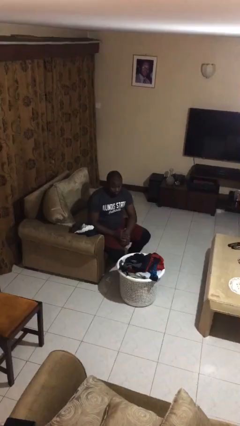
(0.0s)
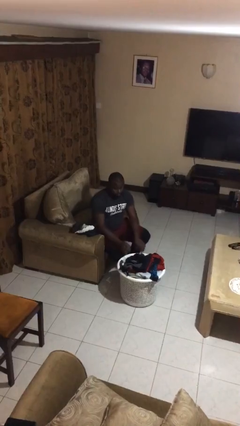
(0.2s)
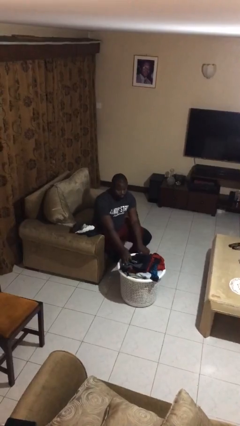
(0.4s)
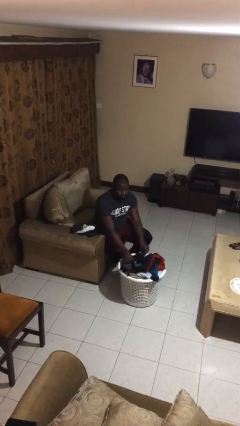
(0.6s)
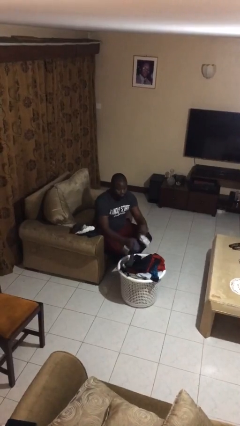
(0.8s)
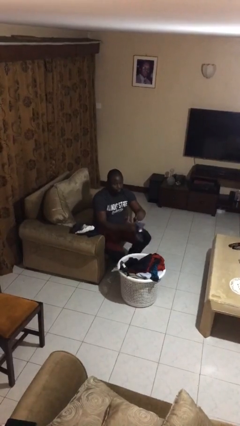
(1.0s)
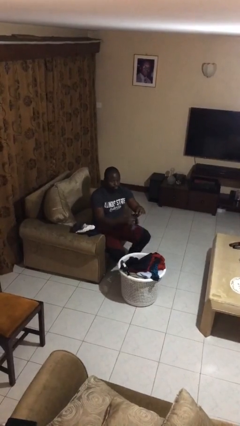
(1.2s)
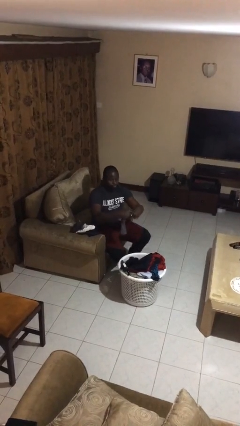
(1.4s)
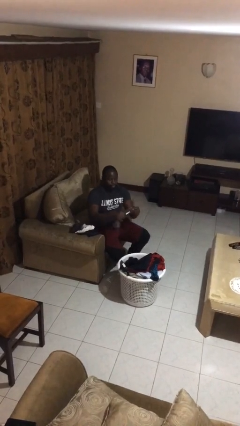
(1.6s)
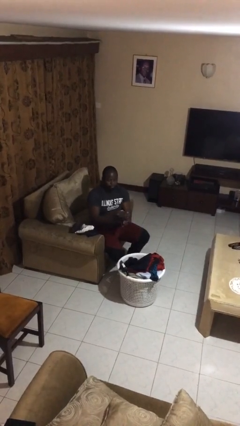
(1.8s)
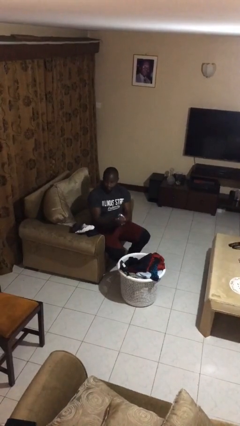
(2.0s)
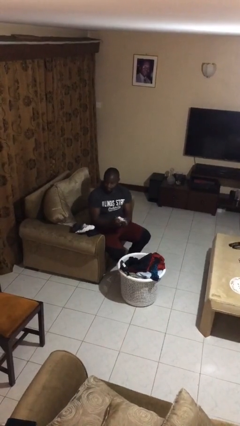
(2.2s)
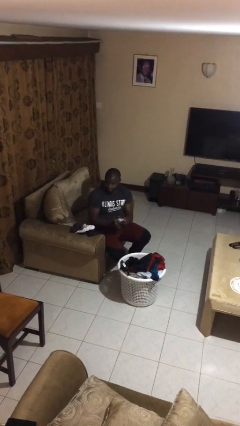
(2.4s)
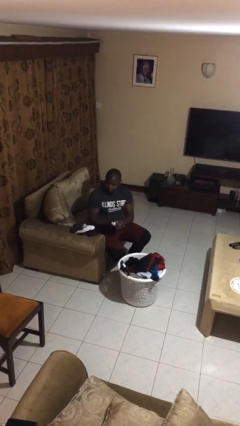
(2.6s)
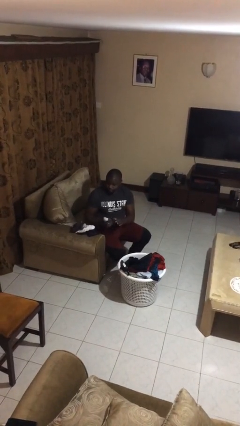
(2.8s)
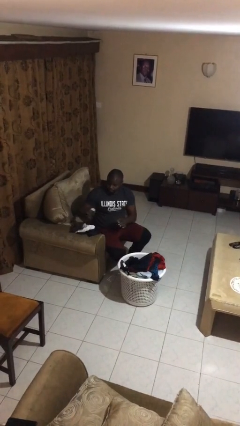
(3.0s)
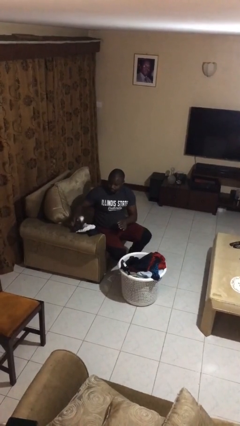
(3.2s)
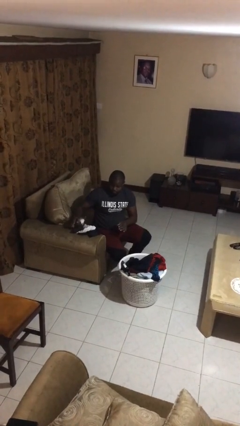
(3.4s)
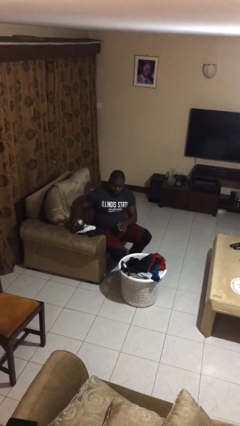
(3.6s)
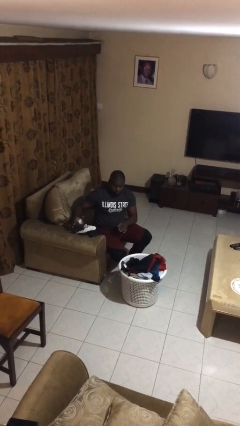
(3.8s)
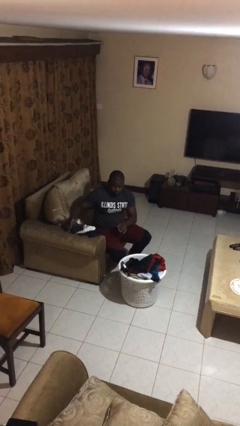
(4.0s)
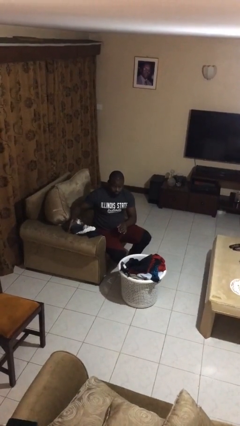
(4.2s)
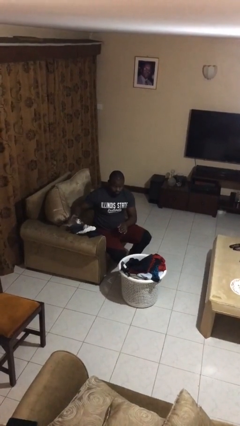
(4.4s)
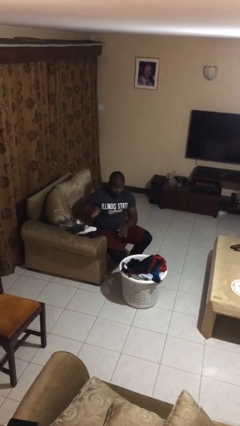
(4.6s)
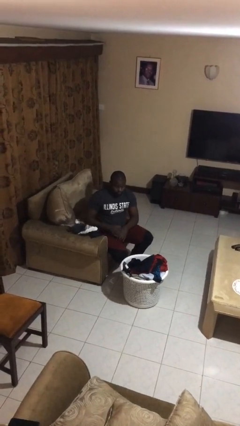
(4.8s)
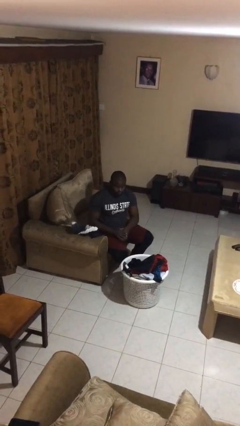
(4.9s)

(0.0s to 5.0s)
person folds socks

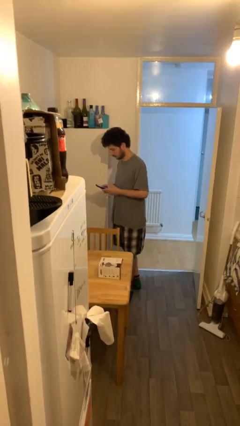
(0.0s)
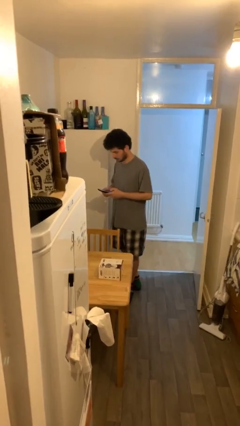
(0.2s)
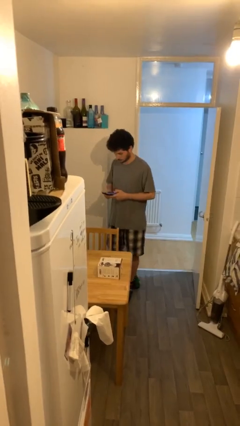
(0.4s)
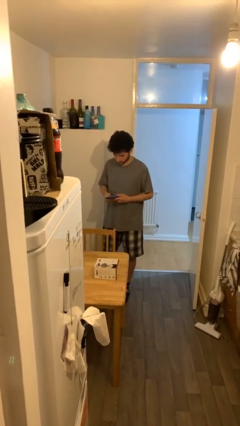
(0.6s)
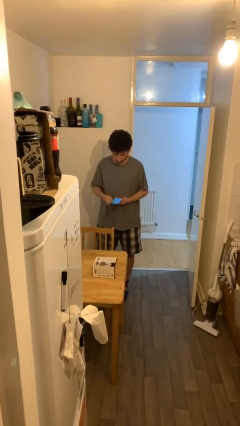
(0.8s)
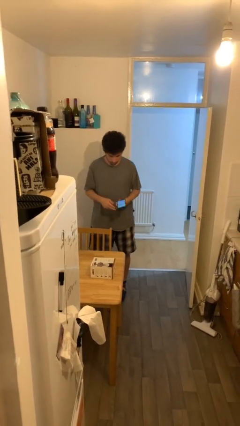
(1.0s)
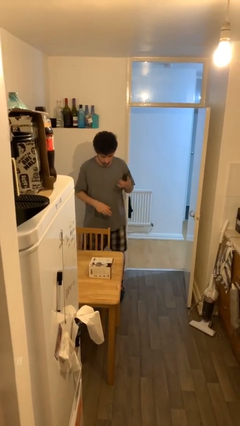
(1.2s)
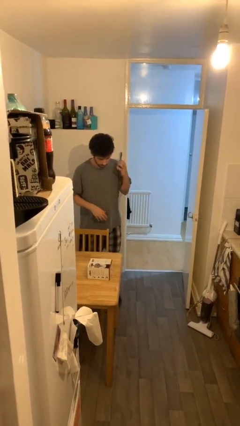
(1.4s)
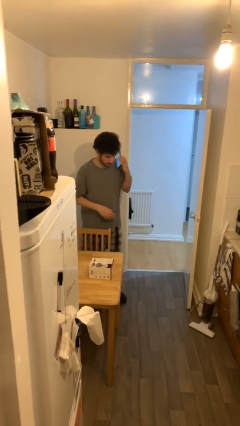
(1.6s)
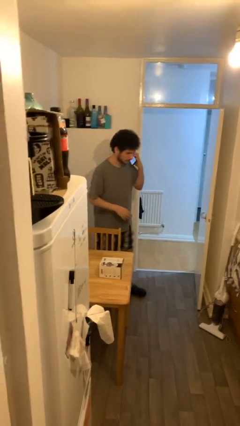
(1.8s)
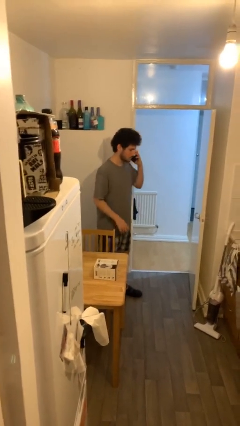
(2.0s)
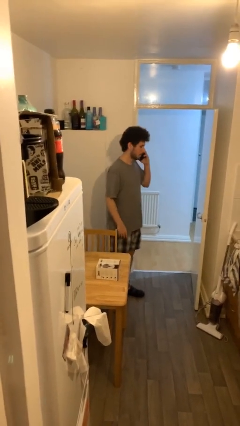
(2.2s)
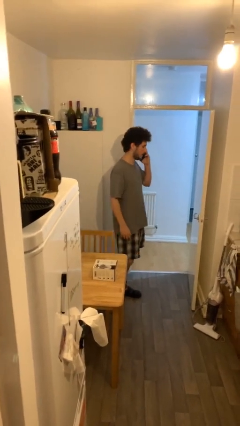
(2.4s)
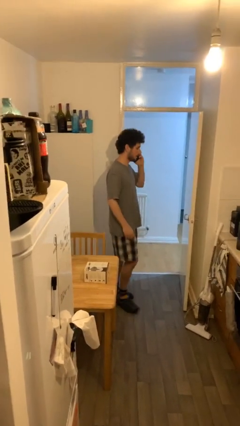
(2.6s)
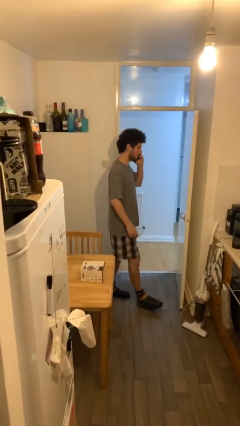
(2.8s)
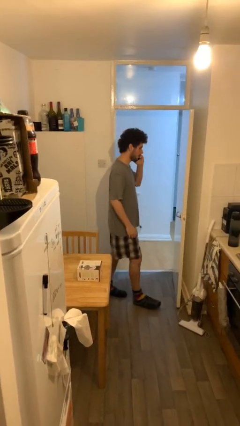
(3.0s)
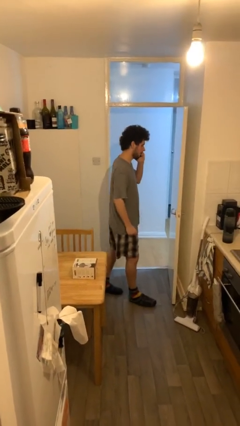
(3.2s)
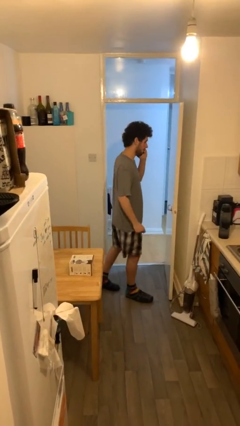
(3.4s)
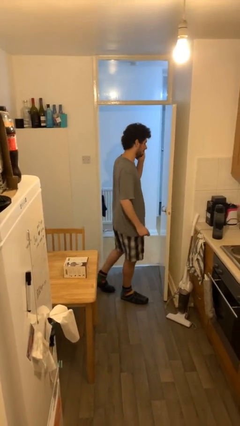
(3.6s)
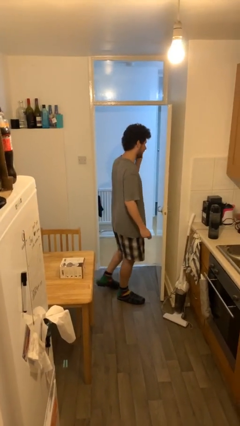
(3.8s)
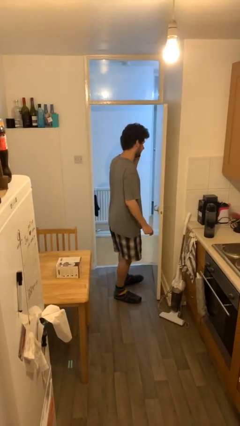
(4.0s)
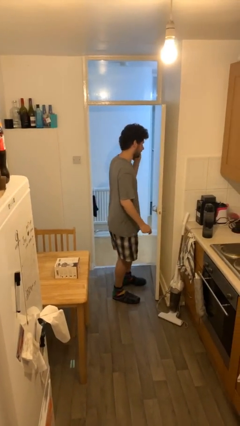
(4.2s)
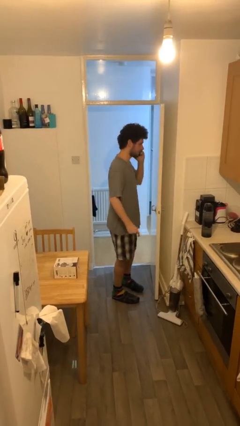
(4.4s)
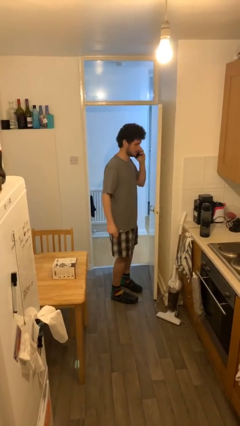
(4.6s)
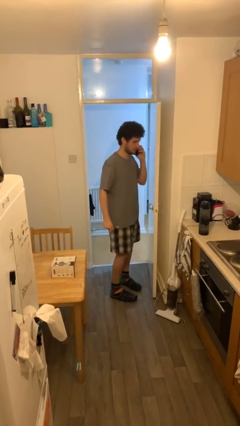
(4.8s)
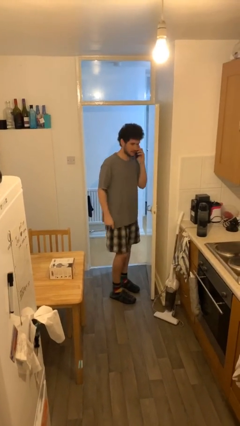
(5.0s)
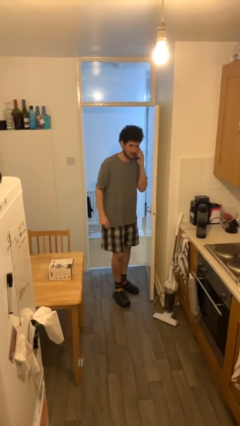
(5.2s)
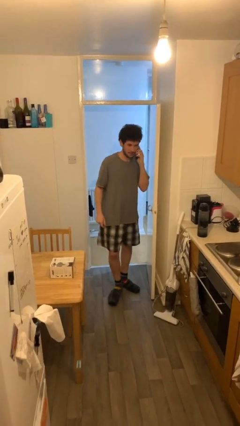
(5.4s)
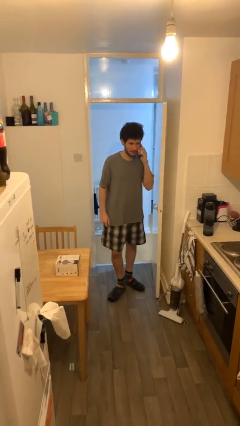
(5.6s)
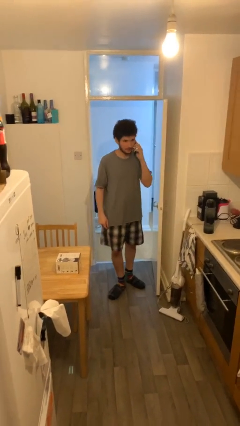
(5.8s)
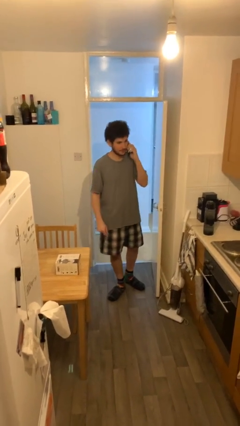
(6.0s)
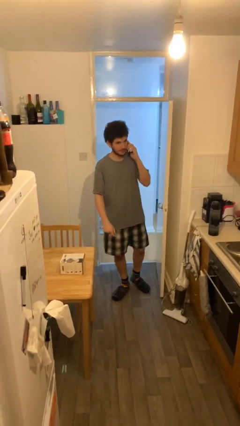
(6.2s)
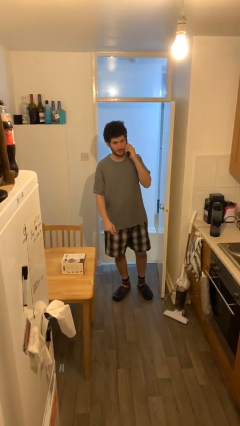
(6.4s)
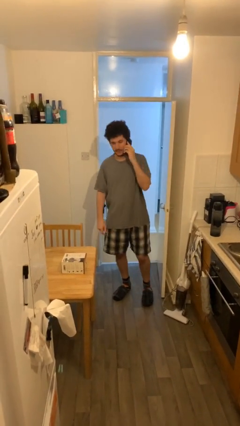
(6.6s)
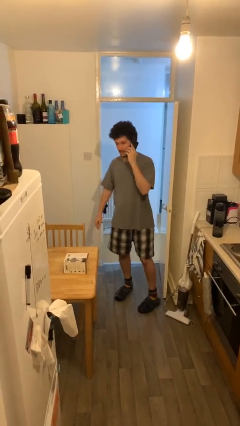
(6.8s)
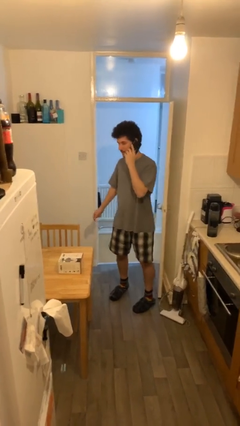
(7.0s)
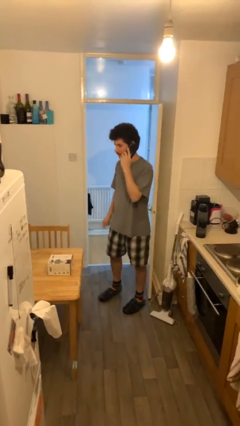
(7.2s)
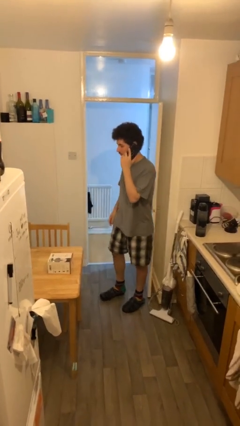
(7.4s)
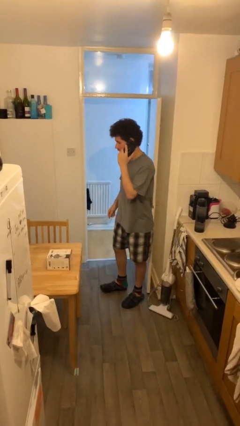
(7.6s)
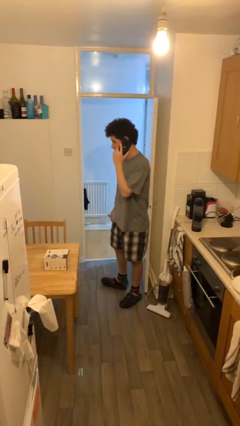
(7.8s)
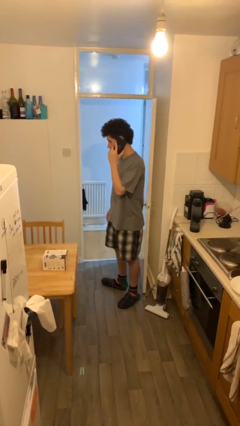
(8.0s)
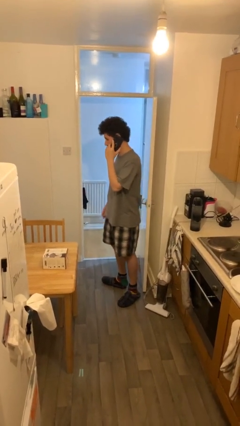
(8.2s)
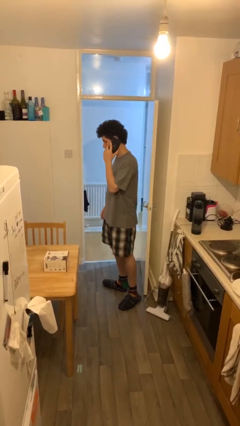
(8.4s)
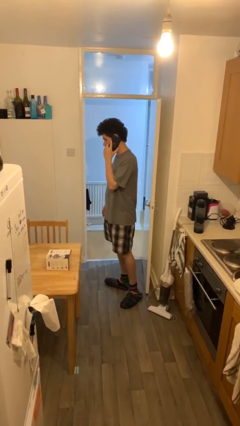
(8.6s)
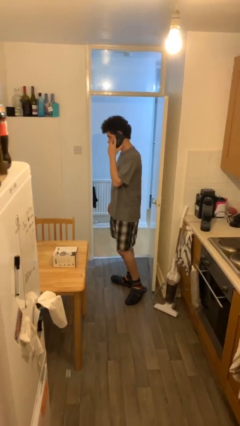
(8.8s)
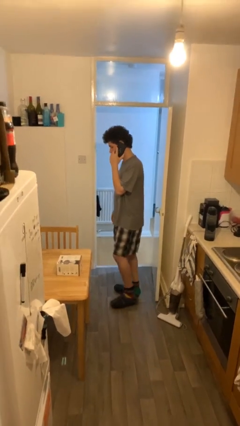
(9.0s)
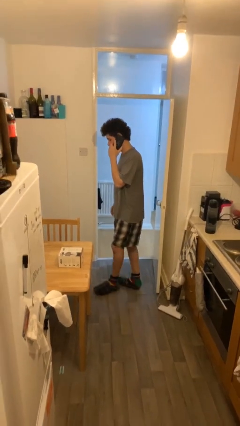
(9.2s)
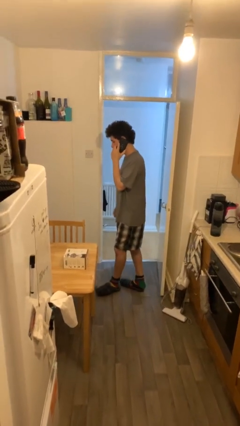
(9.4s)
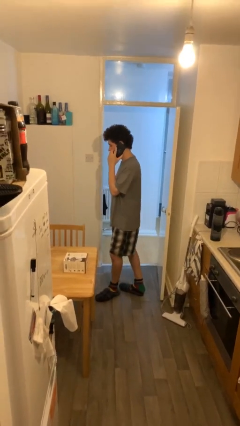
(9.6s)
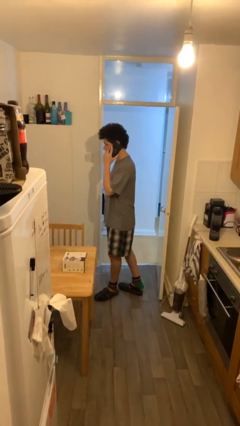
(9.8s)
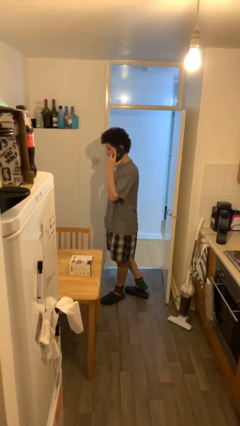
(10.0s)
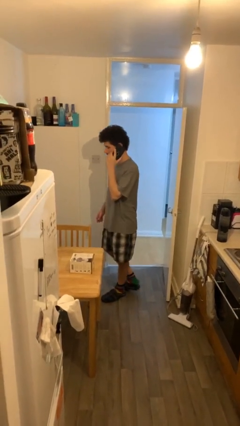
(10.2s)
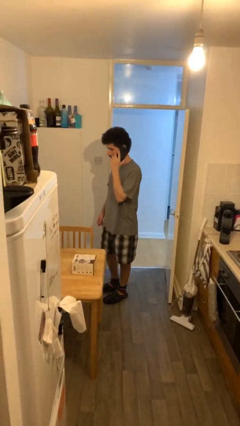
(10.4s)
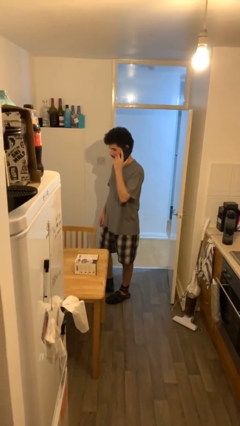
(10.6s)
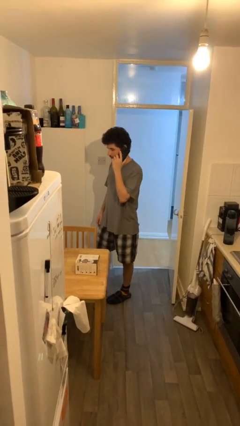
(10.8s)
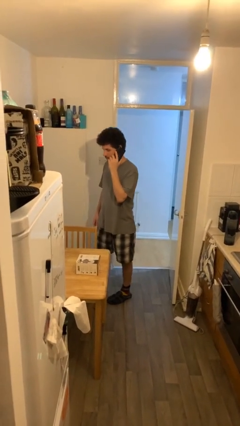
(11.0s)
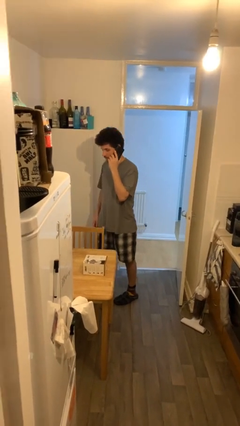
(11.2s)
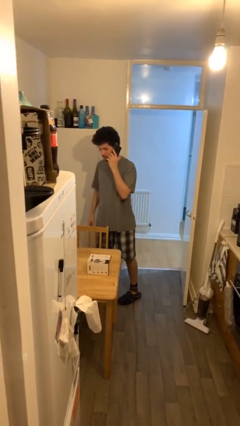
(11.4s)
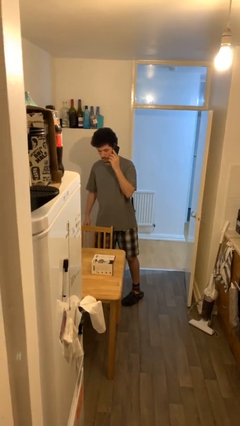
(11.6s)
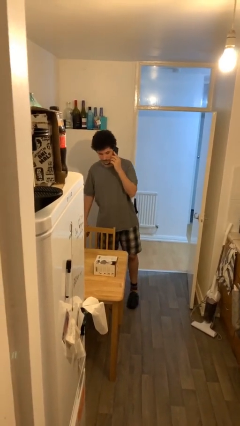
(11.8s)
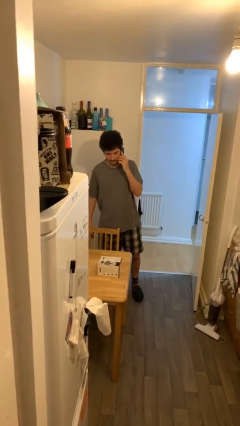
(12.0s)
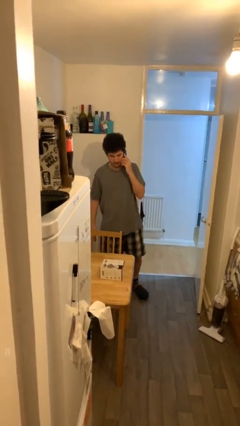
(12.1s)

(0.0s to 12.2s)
person talks on phone

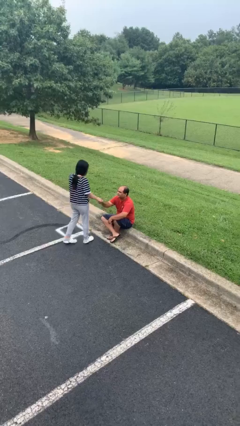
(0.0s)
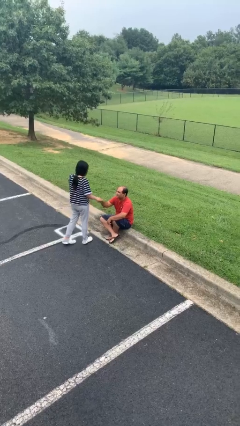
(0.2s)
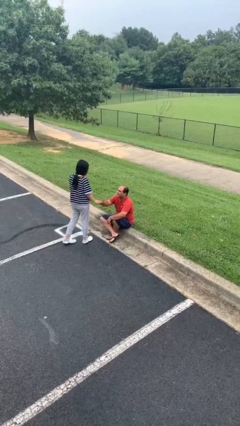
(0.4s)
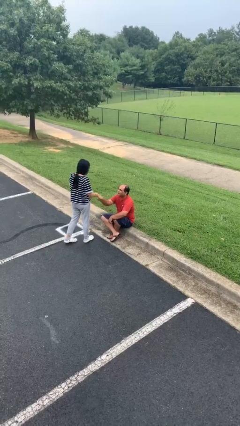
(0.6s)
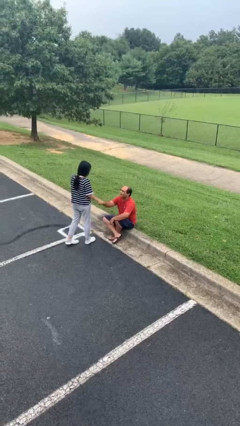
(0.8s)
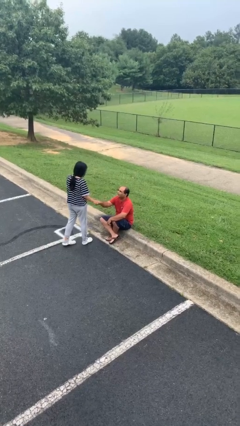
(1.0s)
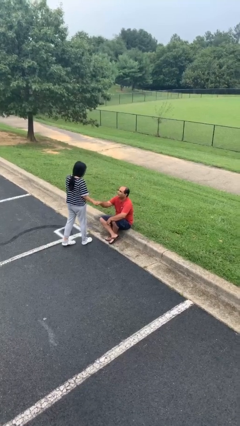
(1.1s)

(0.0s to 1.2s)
person shakes hand
